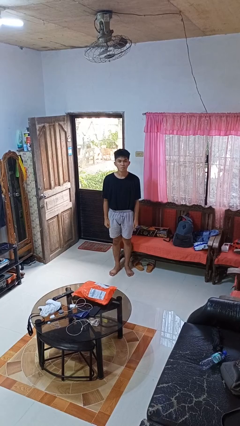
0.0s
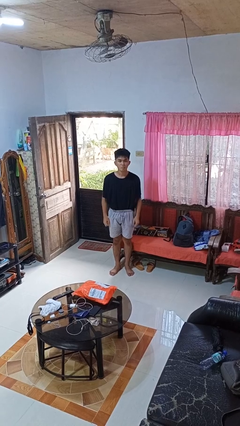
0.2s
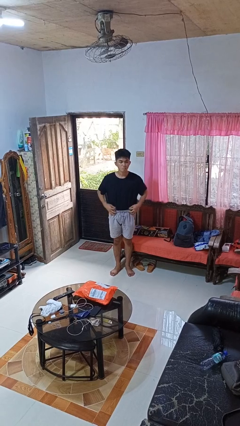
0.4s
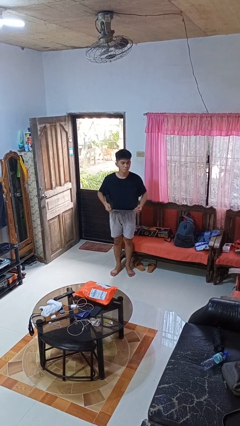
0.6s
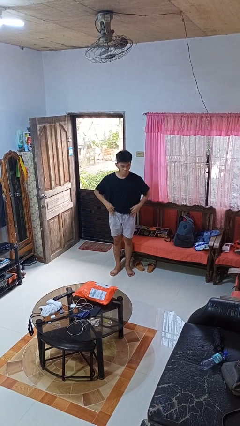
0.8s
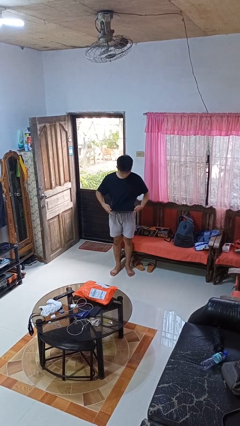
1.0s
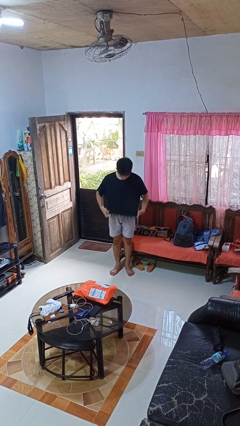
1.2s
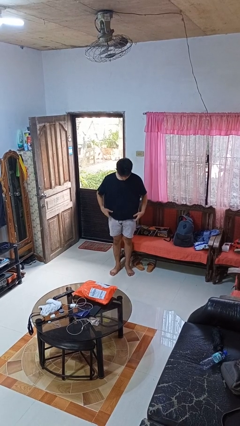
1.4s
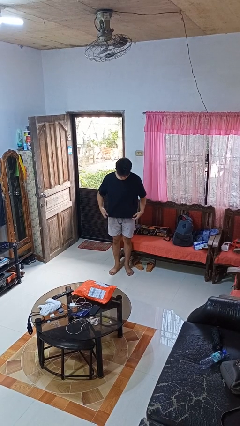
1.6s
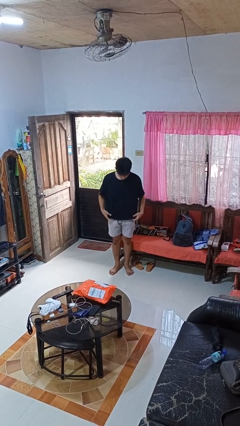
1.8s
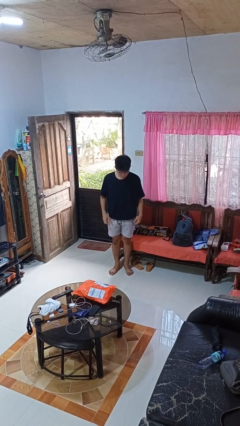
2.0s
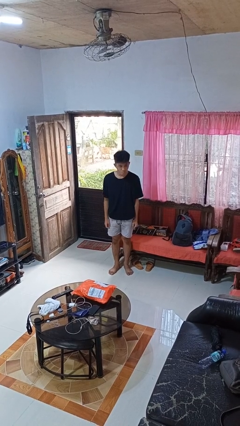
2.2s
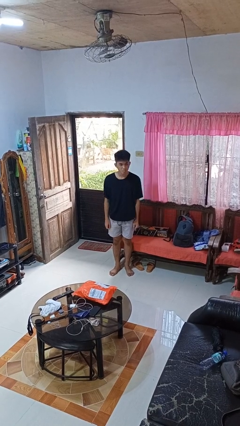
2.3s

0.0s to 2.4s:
person untucks shirt

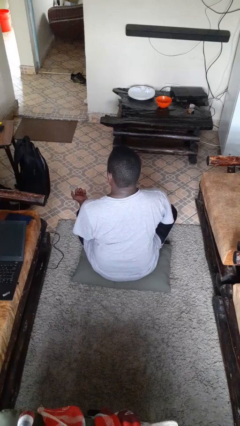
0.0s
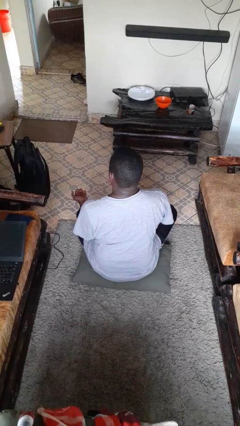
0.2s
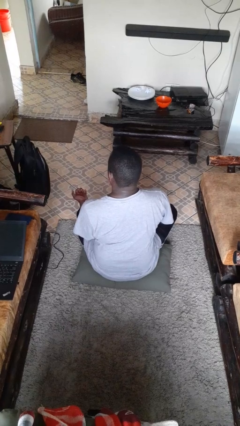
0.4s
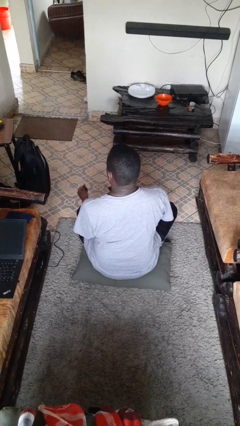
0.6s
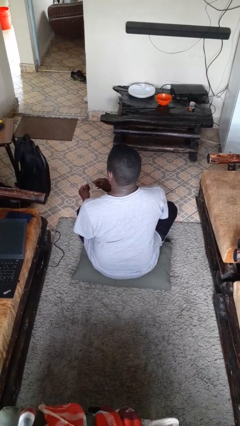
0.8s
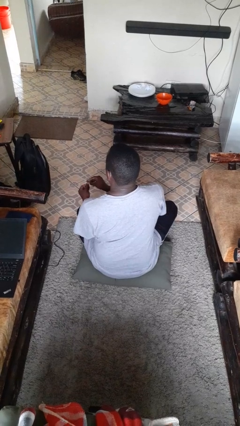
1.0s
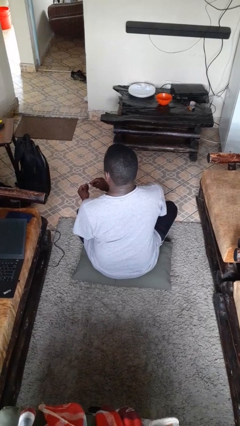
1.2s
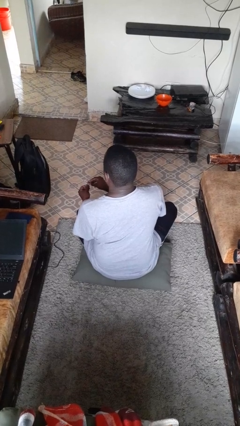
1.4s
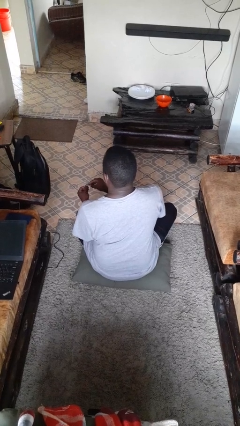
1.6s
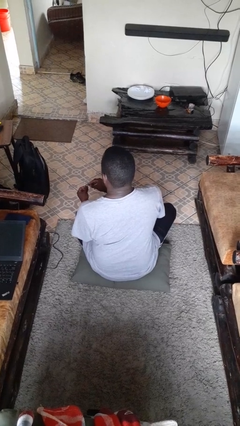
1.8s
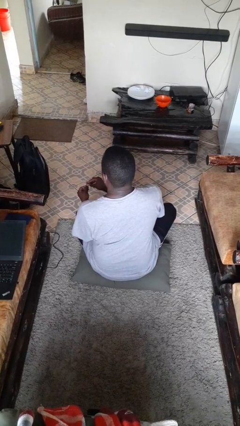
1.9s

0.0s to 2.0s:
person files fingernails

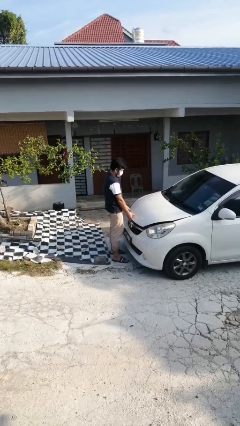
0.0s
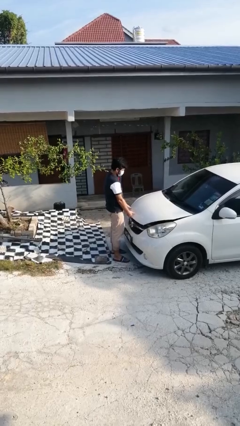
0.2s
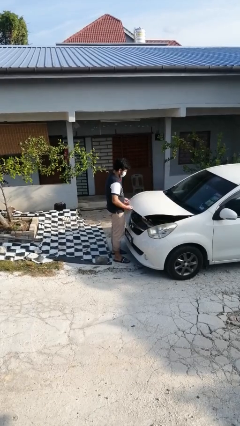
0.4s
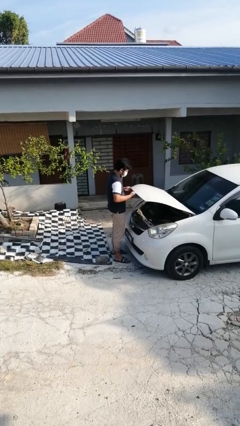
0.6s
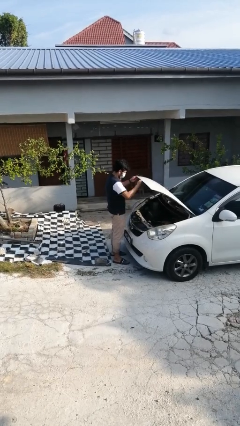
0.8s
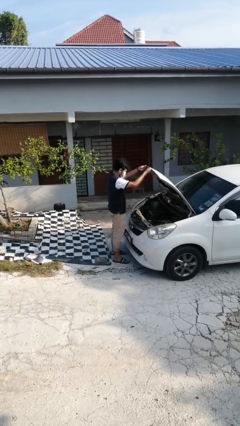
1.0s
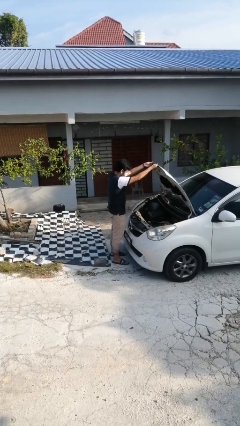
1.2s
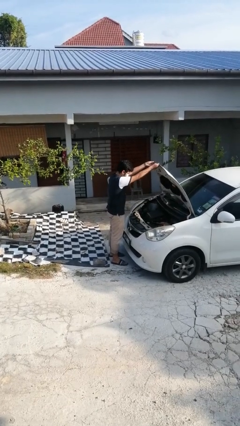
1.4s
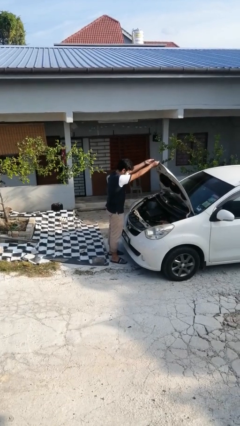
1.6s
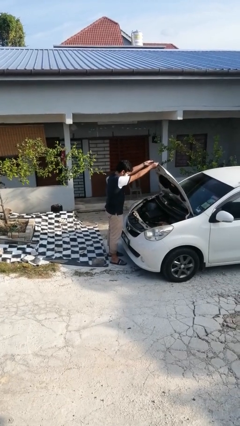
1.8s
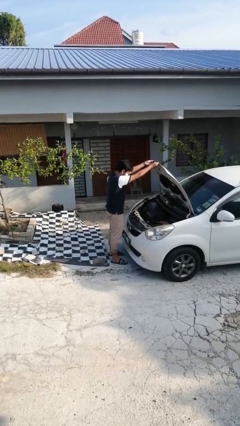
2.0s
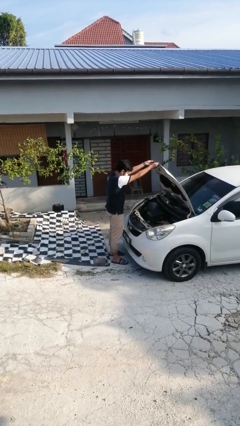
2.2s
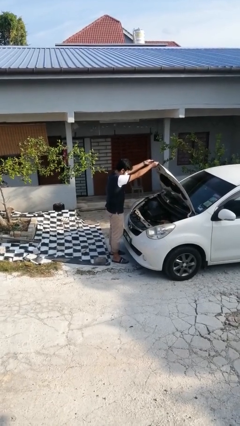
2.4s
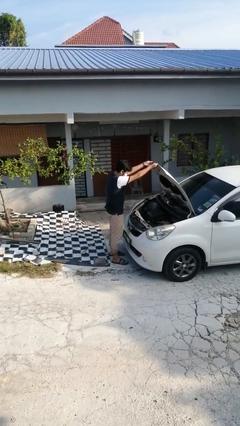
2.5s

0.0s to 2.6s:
person opens car hood

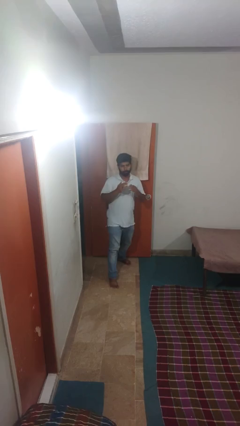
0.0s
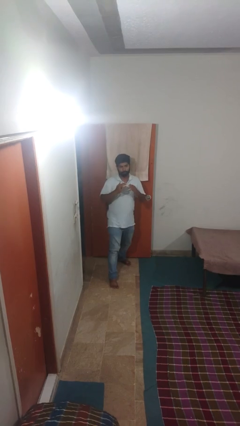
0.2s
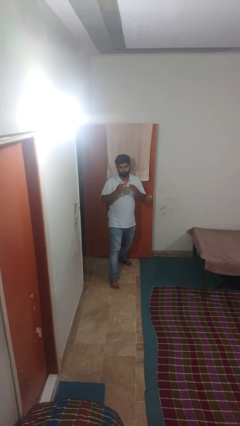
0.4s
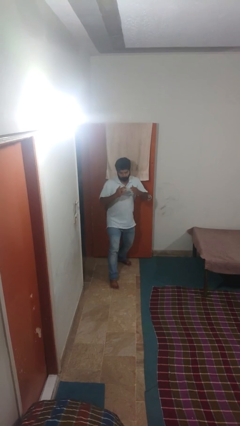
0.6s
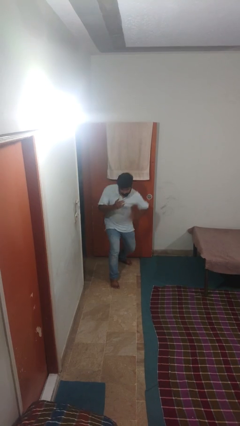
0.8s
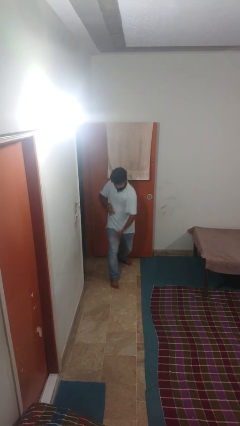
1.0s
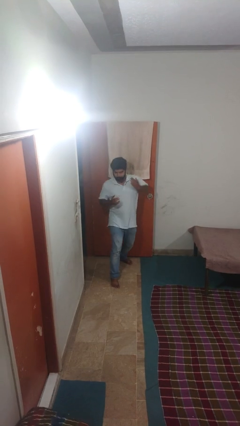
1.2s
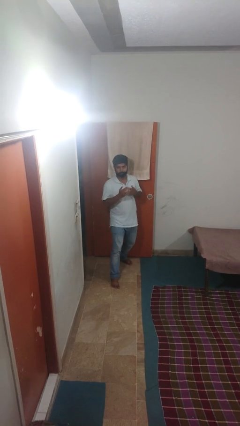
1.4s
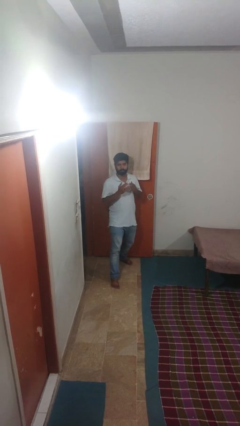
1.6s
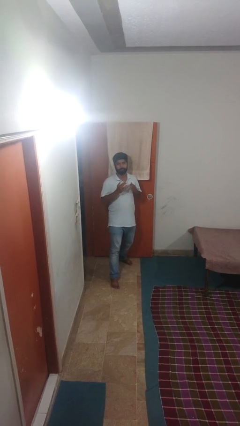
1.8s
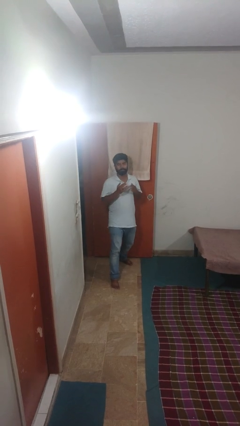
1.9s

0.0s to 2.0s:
person karate chop

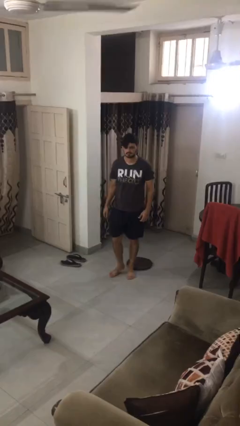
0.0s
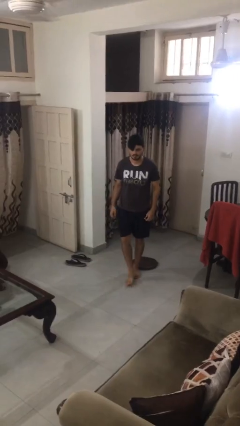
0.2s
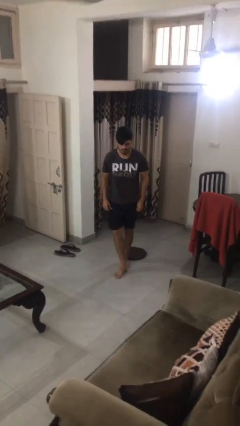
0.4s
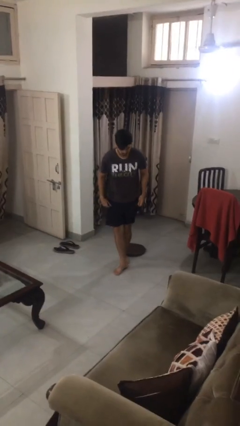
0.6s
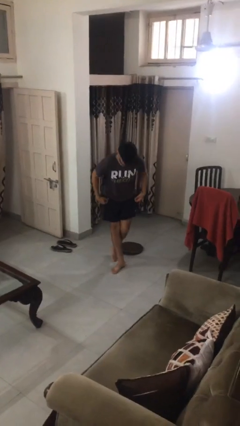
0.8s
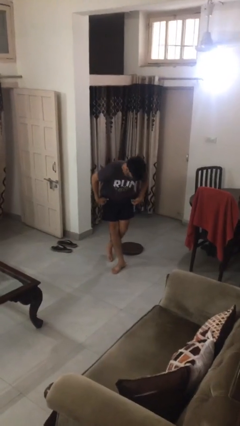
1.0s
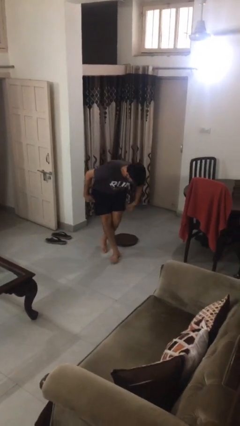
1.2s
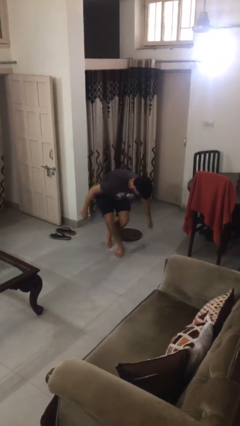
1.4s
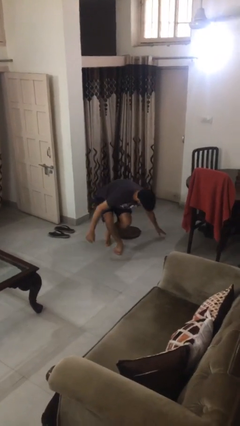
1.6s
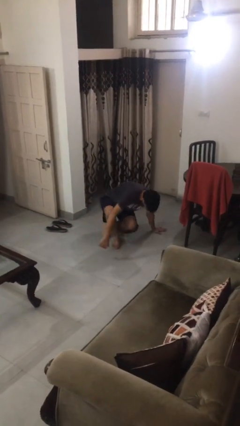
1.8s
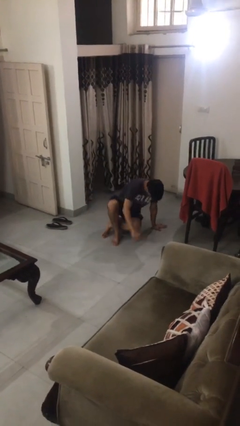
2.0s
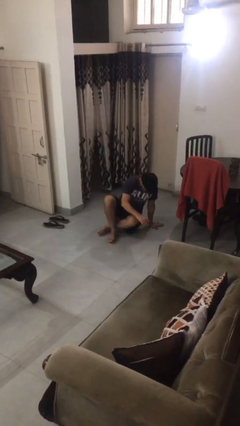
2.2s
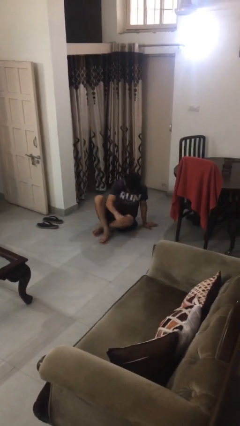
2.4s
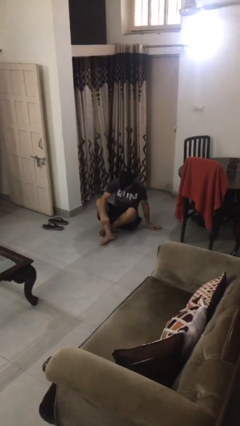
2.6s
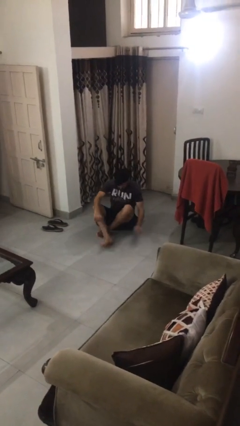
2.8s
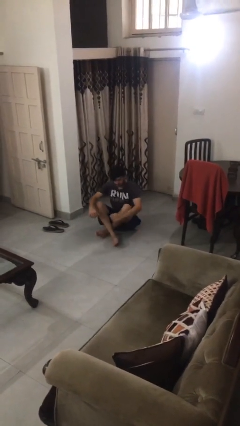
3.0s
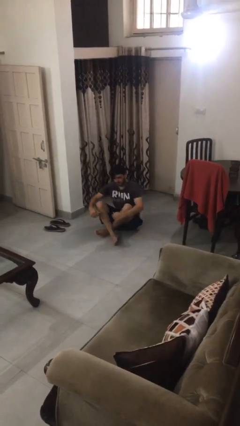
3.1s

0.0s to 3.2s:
person sits crisscross

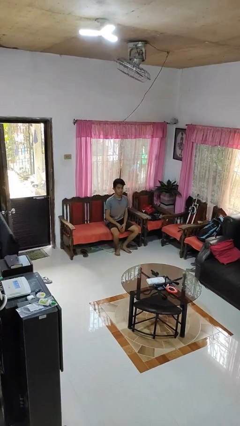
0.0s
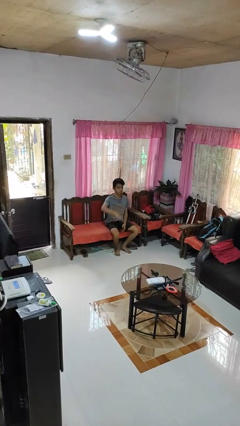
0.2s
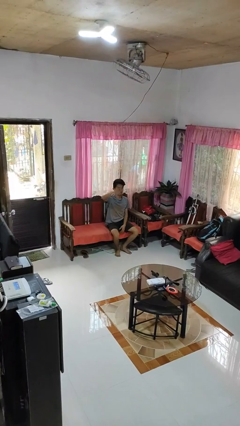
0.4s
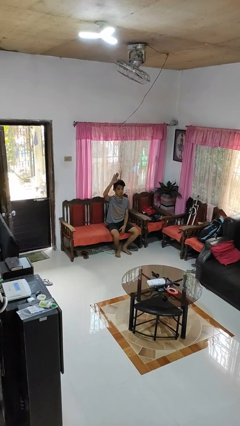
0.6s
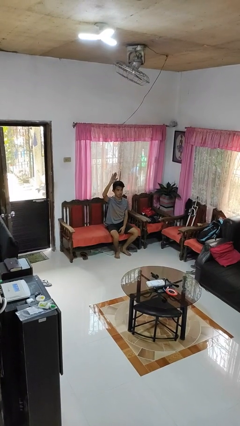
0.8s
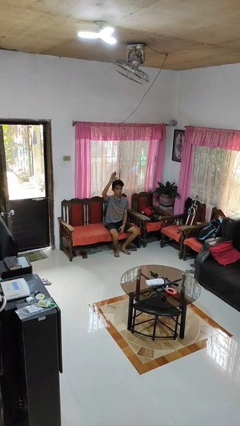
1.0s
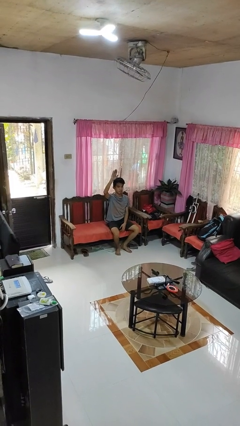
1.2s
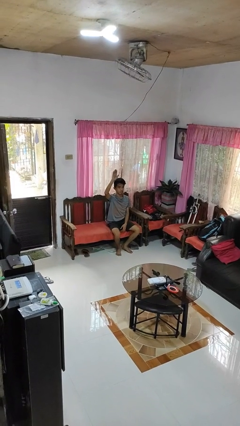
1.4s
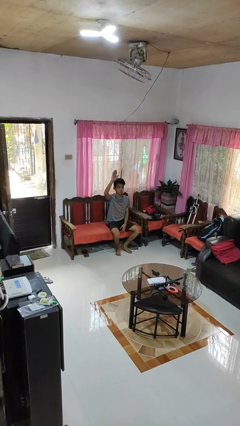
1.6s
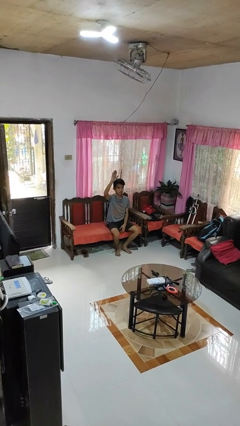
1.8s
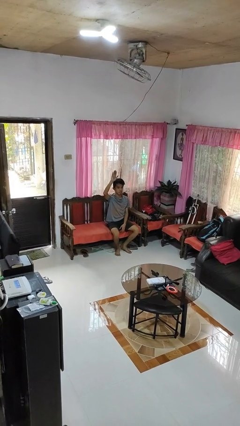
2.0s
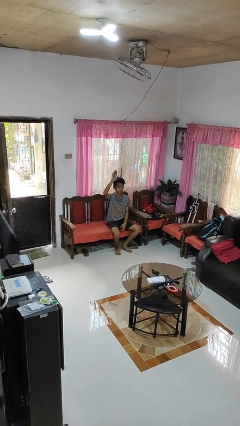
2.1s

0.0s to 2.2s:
person gestures raise hand

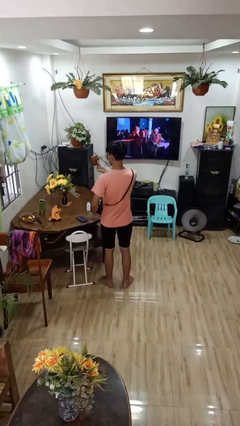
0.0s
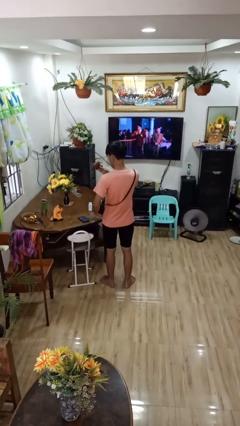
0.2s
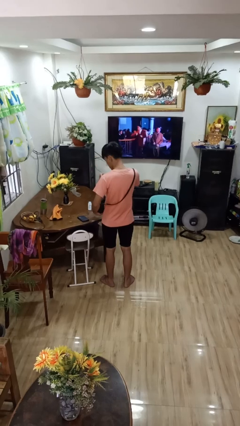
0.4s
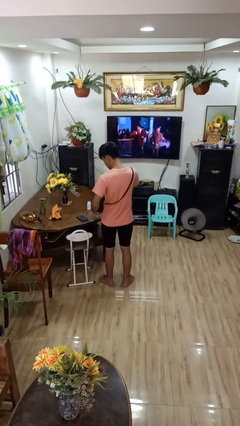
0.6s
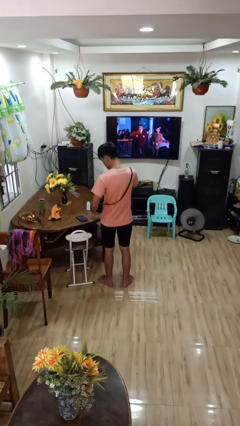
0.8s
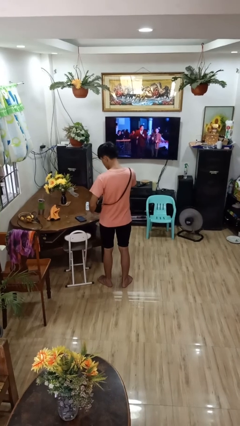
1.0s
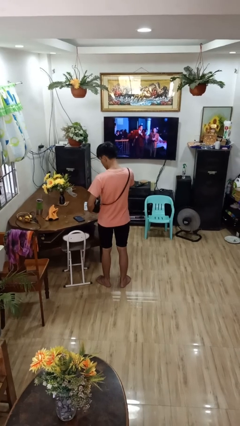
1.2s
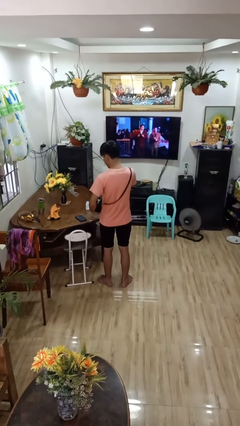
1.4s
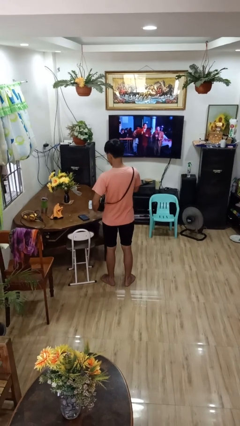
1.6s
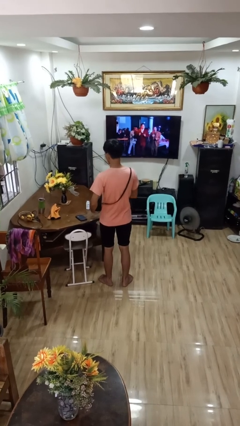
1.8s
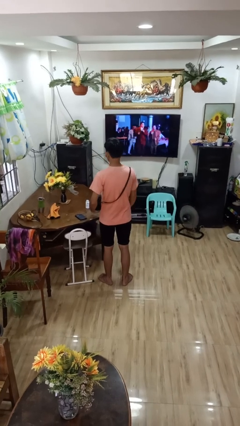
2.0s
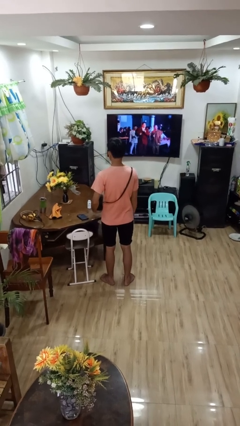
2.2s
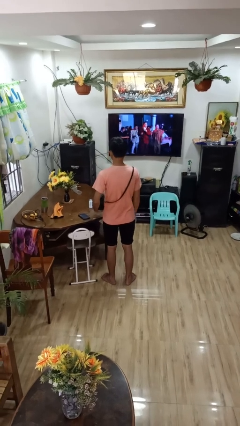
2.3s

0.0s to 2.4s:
person puts object into purse
